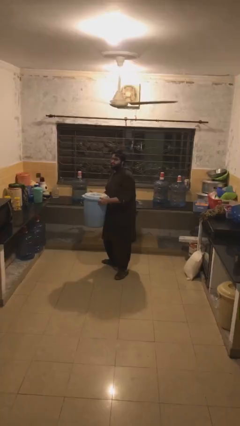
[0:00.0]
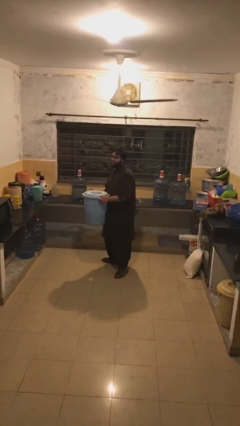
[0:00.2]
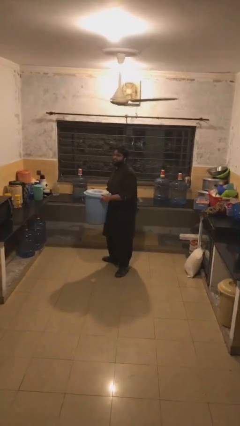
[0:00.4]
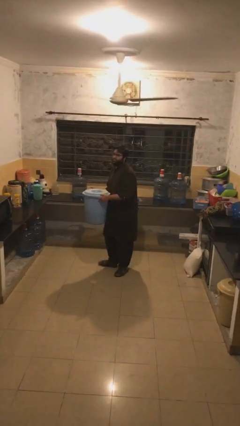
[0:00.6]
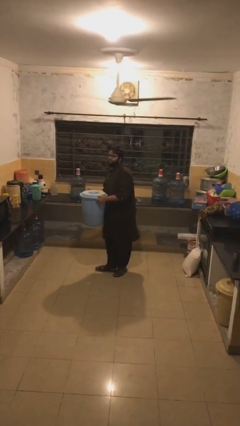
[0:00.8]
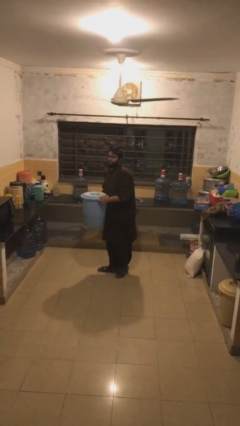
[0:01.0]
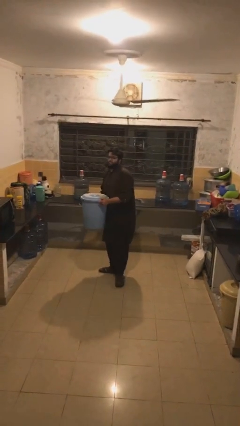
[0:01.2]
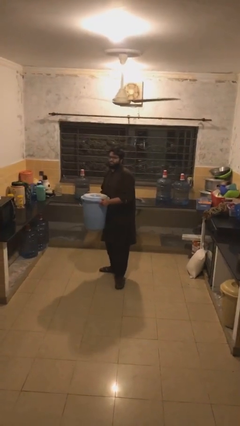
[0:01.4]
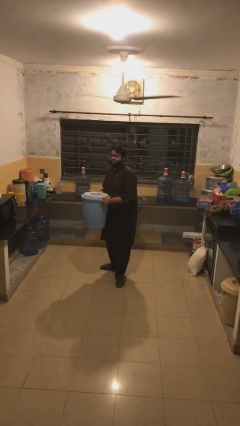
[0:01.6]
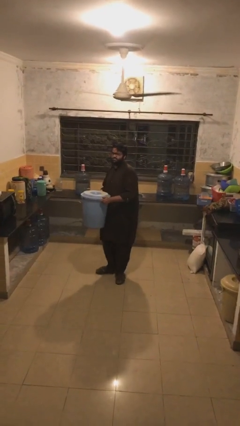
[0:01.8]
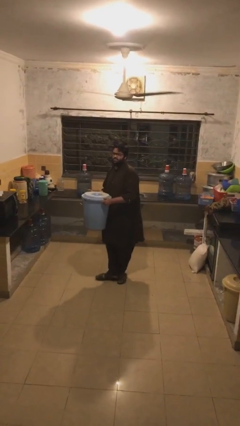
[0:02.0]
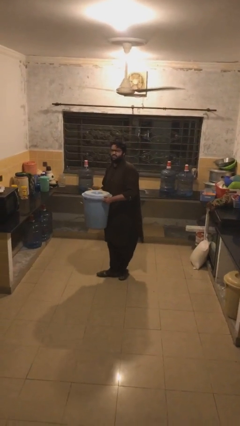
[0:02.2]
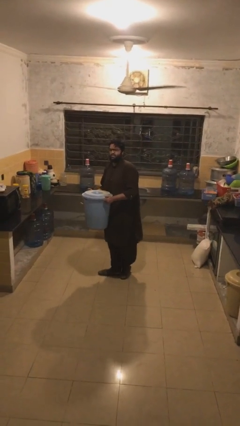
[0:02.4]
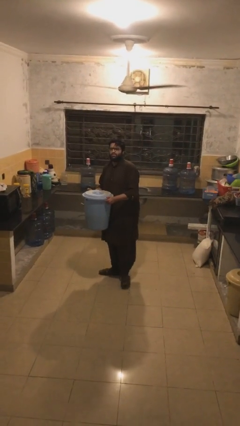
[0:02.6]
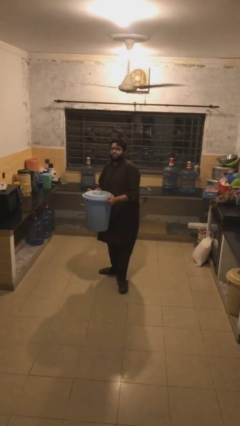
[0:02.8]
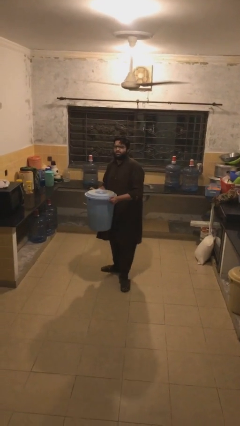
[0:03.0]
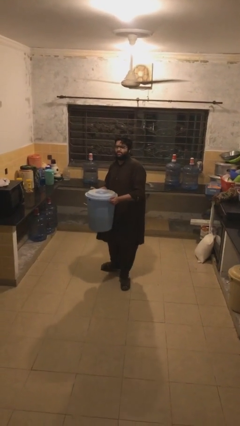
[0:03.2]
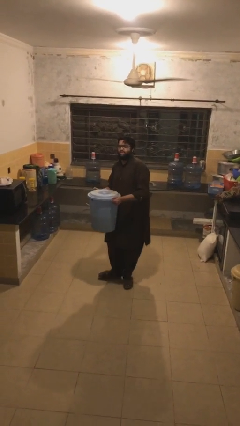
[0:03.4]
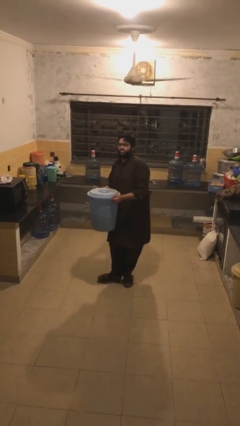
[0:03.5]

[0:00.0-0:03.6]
person carries heavy object

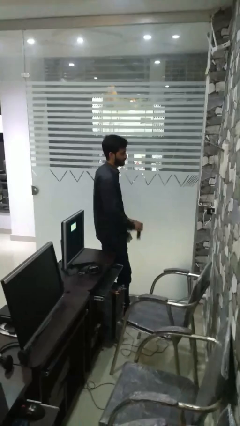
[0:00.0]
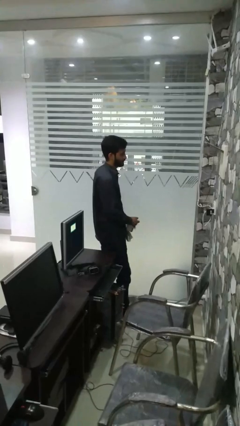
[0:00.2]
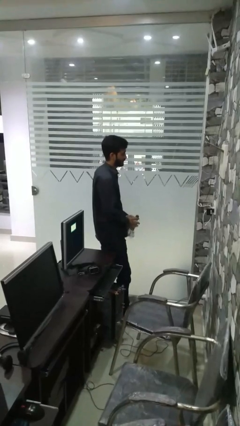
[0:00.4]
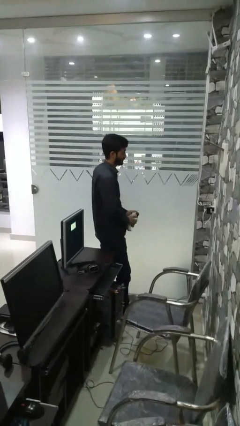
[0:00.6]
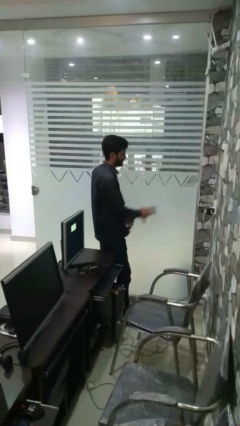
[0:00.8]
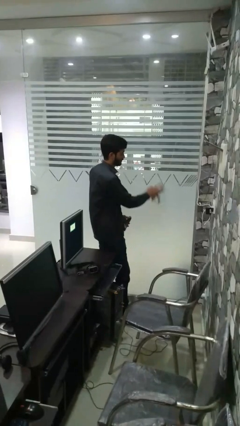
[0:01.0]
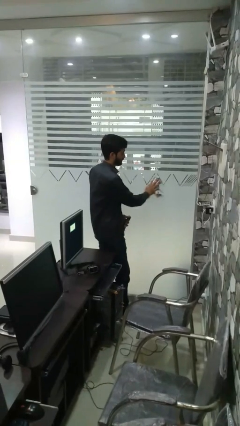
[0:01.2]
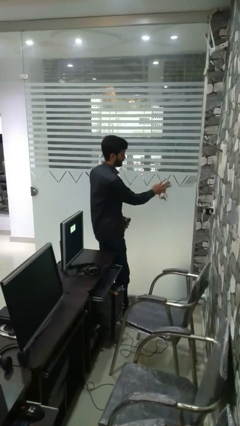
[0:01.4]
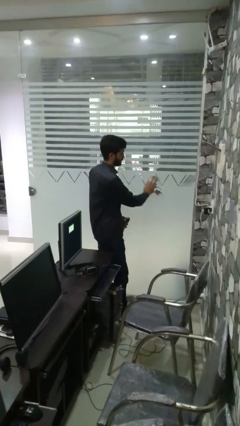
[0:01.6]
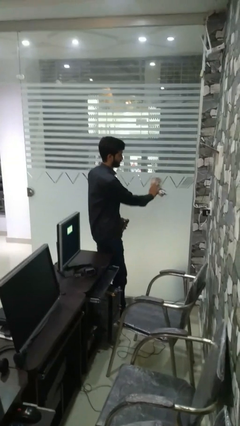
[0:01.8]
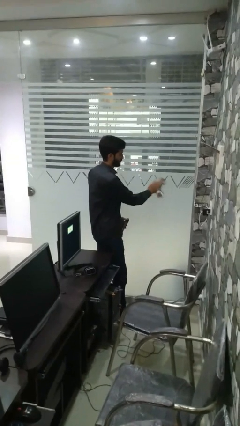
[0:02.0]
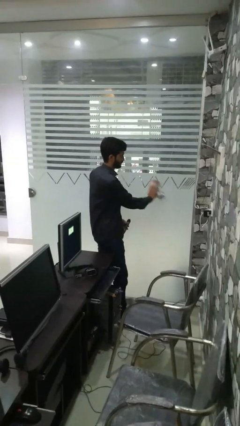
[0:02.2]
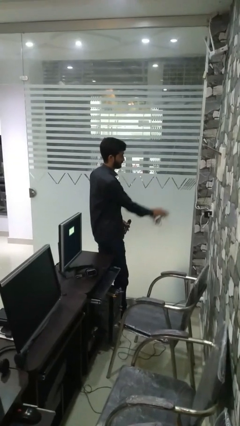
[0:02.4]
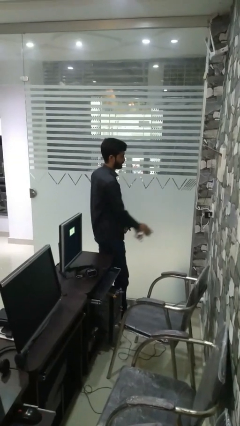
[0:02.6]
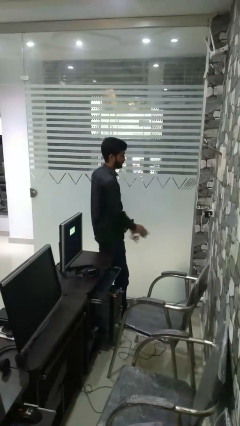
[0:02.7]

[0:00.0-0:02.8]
person washes window

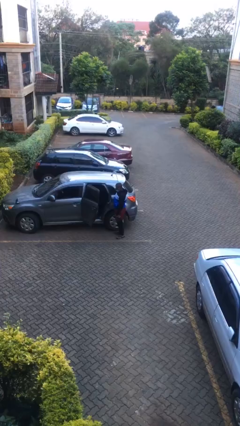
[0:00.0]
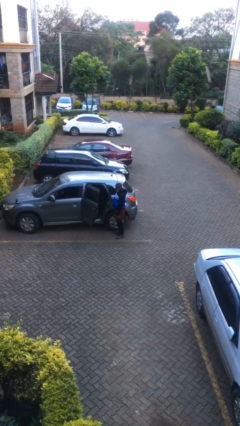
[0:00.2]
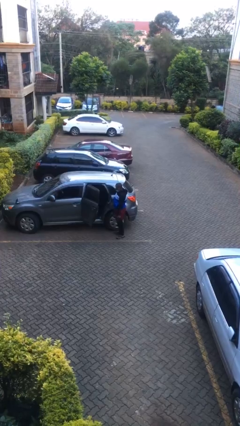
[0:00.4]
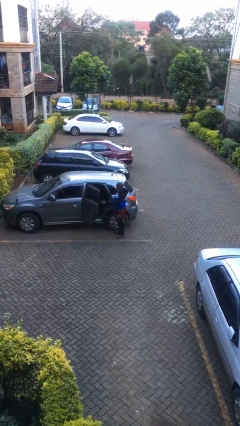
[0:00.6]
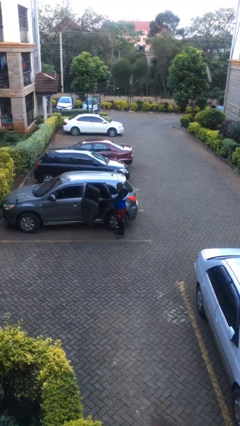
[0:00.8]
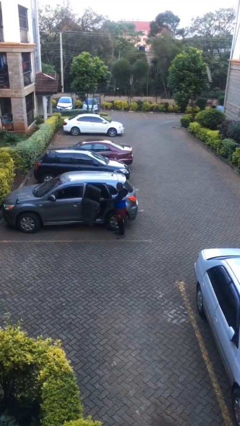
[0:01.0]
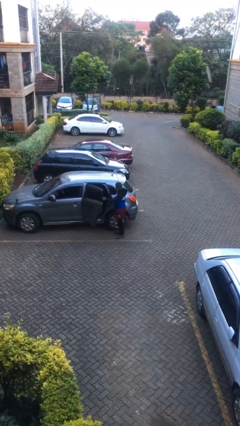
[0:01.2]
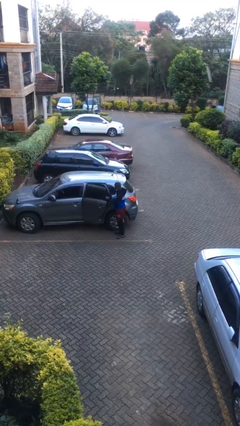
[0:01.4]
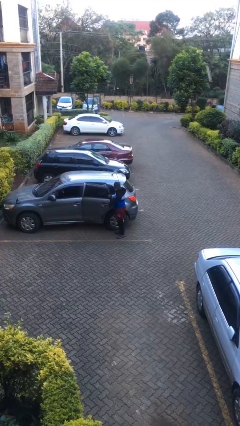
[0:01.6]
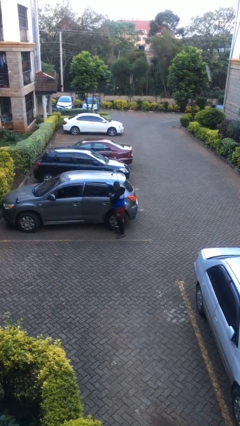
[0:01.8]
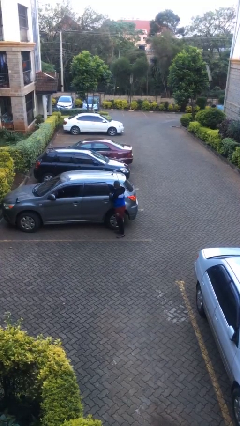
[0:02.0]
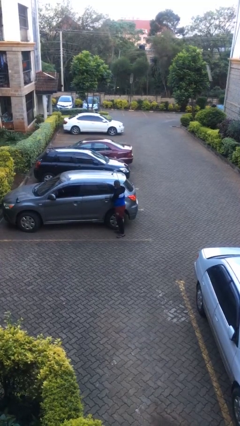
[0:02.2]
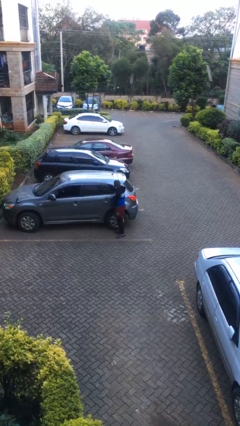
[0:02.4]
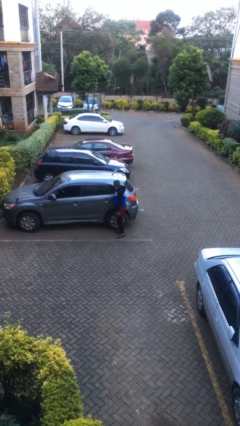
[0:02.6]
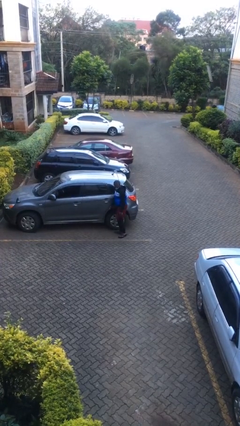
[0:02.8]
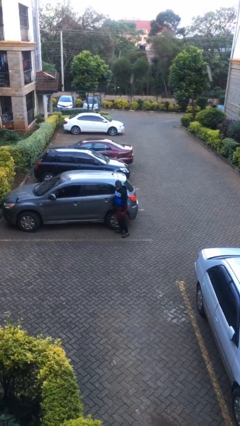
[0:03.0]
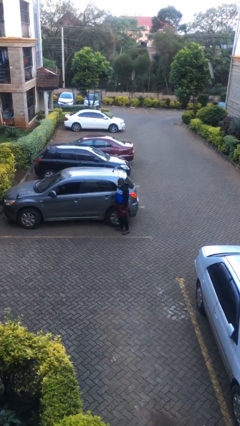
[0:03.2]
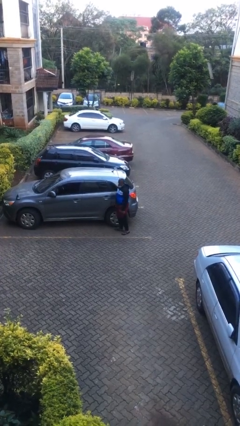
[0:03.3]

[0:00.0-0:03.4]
person closes car door

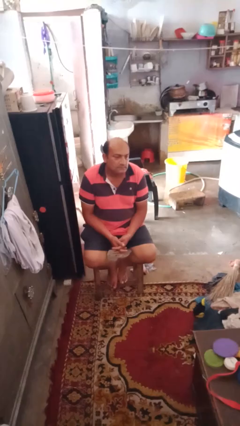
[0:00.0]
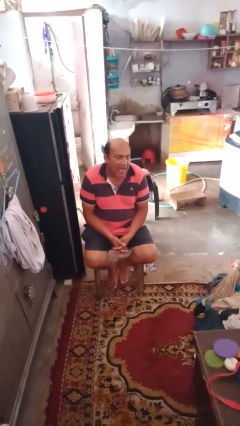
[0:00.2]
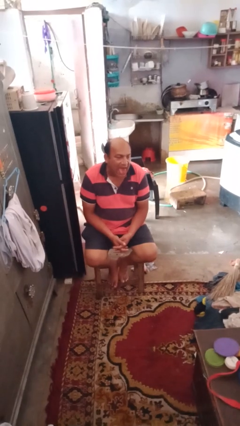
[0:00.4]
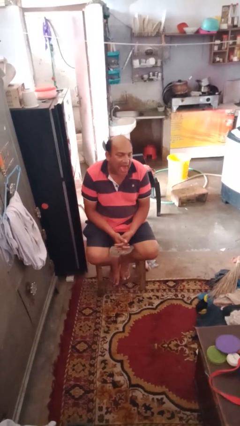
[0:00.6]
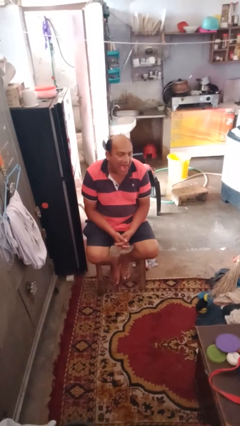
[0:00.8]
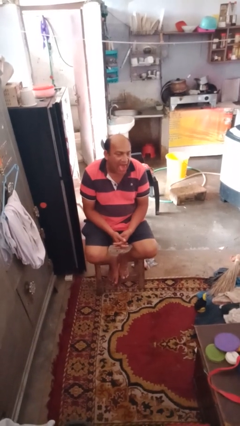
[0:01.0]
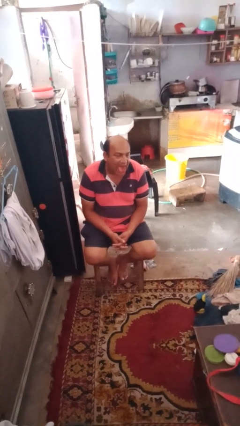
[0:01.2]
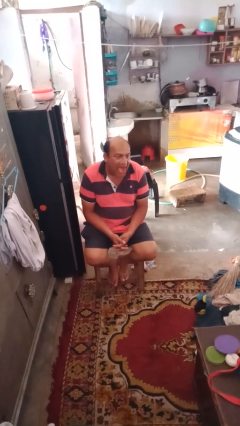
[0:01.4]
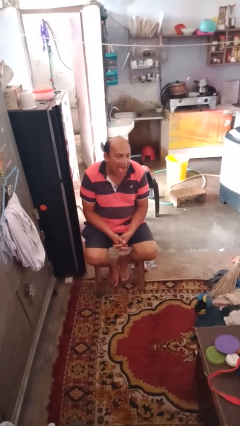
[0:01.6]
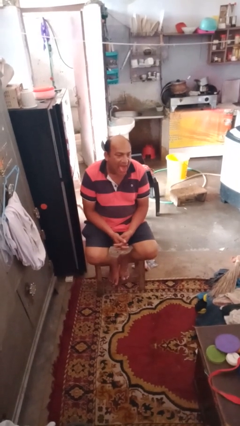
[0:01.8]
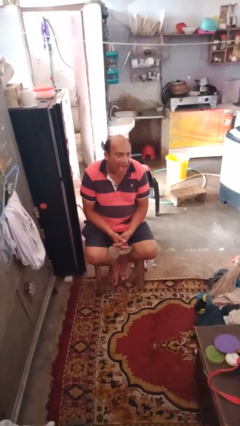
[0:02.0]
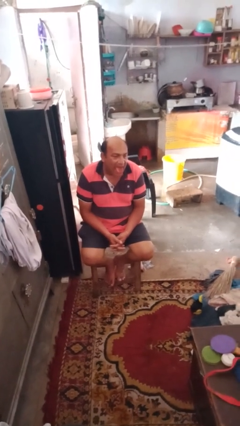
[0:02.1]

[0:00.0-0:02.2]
person sticks out tongue

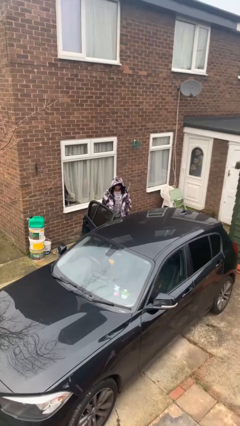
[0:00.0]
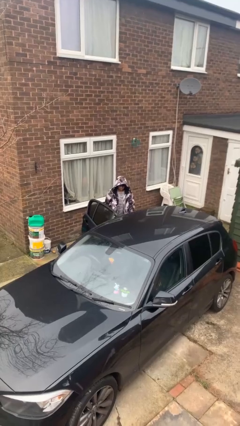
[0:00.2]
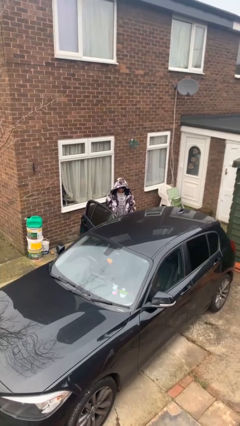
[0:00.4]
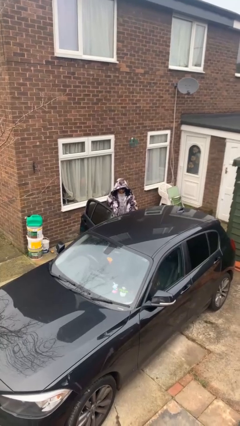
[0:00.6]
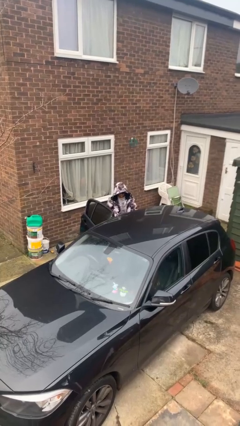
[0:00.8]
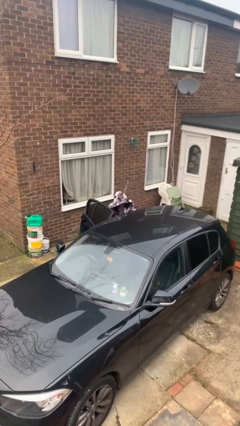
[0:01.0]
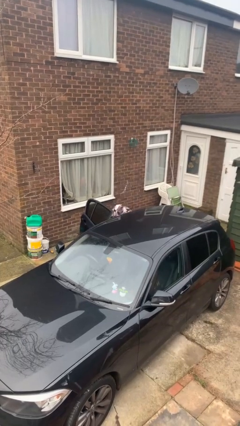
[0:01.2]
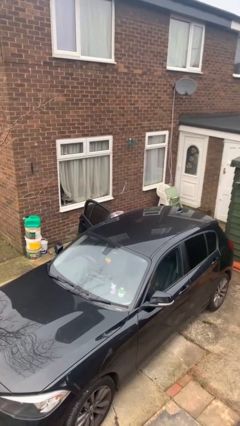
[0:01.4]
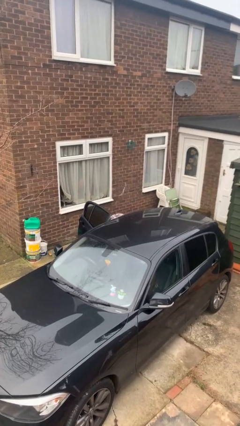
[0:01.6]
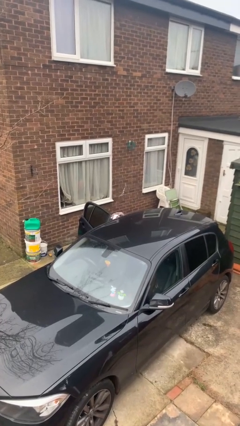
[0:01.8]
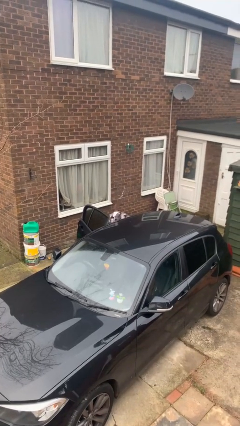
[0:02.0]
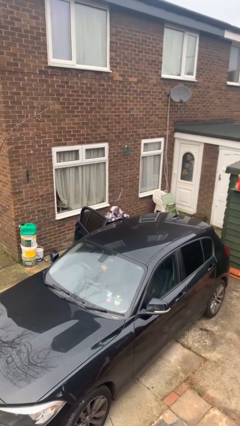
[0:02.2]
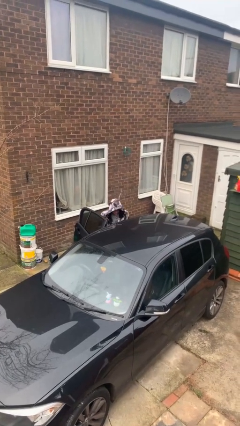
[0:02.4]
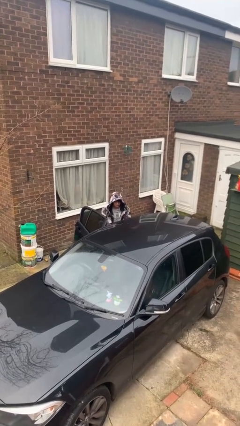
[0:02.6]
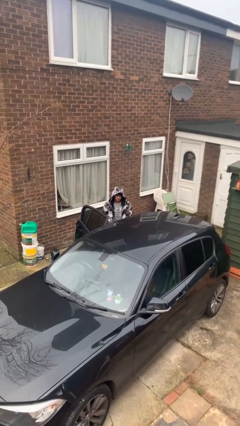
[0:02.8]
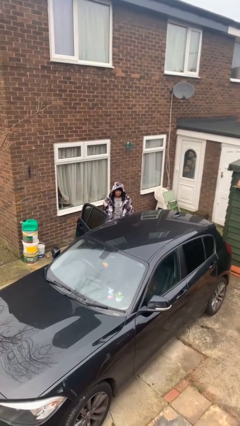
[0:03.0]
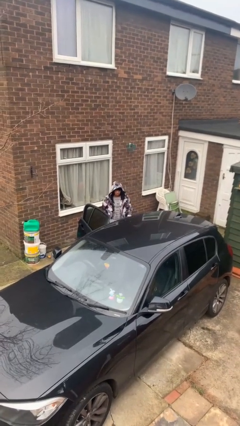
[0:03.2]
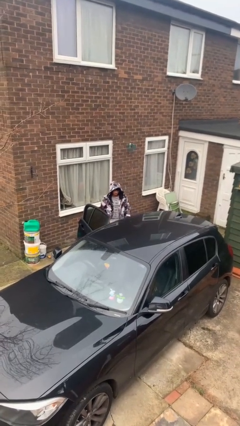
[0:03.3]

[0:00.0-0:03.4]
person unloads car

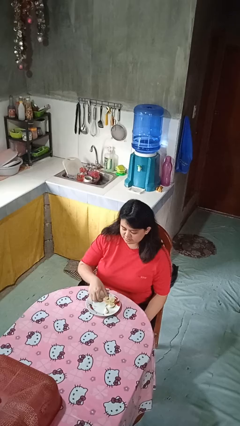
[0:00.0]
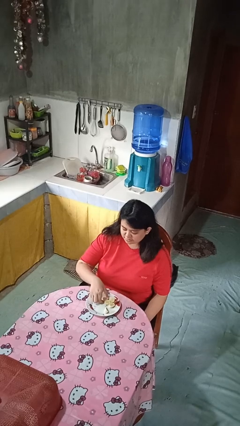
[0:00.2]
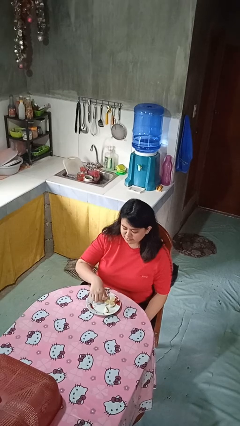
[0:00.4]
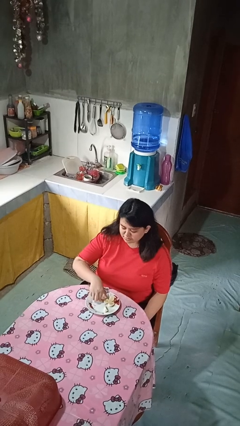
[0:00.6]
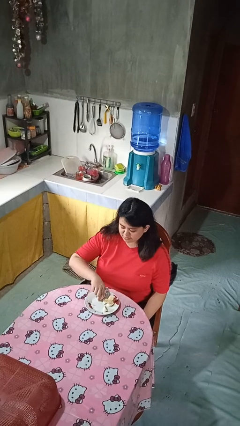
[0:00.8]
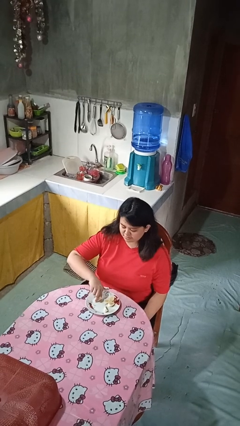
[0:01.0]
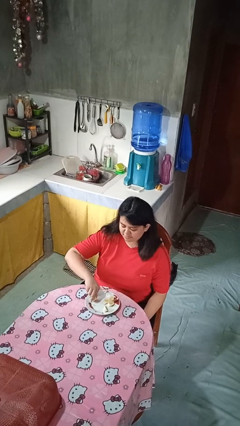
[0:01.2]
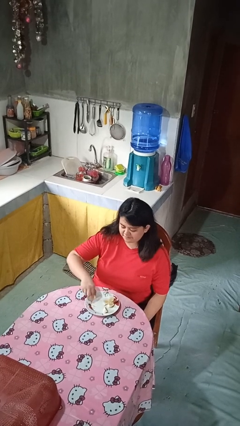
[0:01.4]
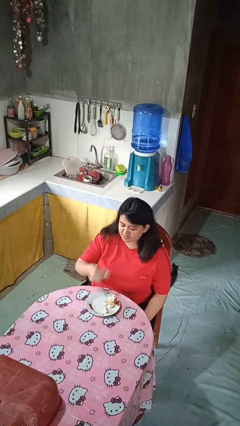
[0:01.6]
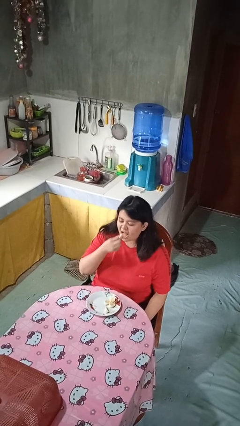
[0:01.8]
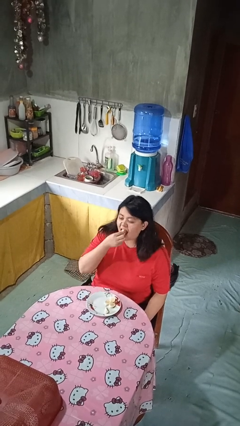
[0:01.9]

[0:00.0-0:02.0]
person eats with hands
